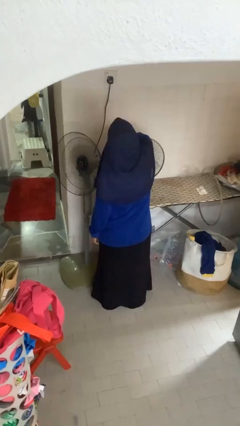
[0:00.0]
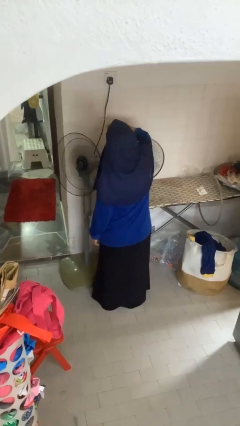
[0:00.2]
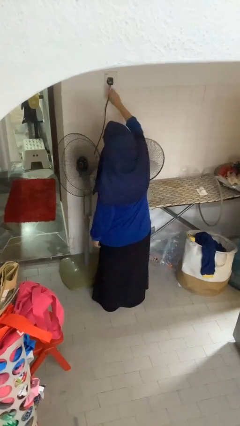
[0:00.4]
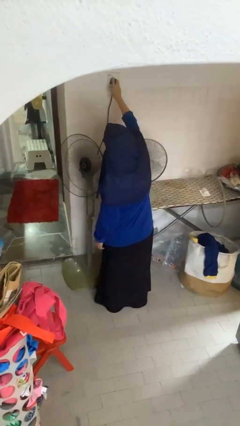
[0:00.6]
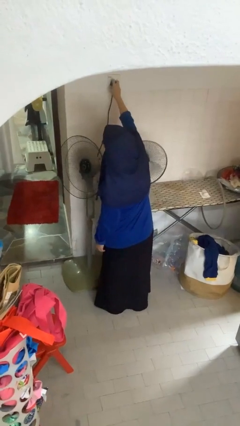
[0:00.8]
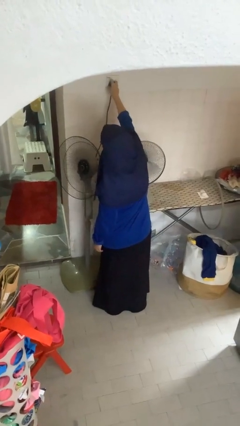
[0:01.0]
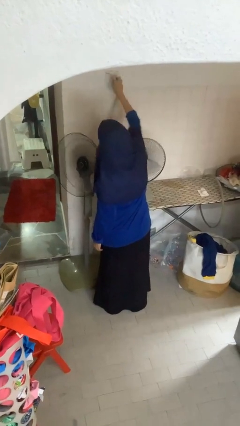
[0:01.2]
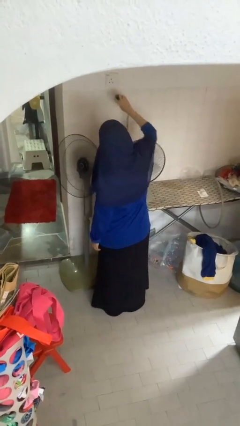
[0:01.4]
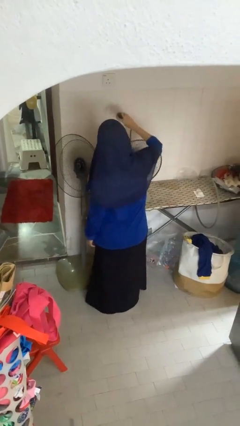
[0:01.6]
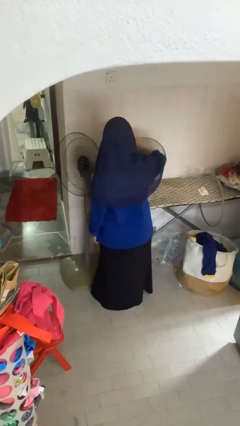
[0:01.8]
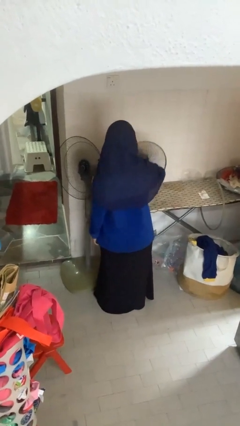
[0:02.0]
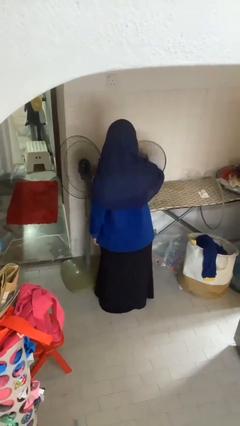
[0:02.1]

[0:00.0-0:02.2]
person unplugs from electrical socket

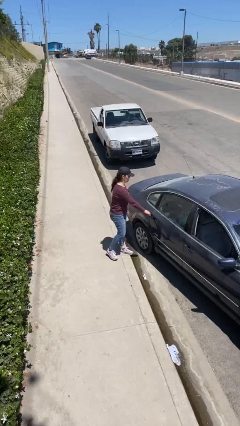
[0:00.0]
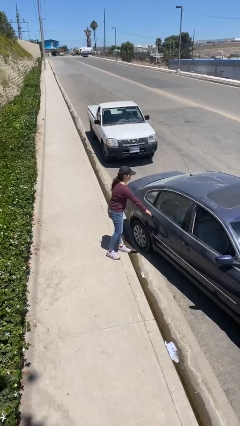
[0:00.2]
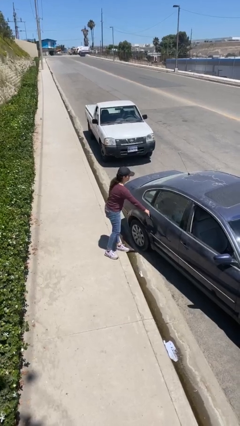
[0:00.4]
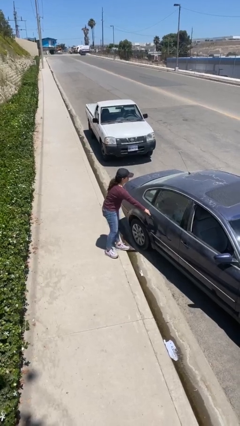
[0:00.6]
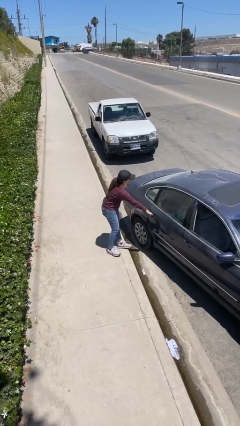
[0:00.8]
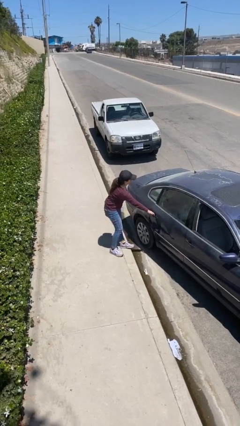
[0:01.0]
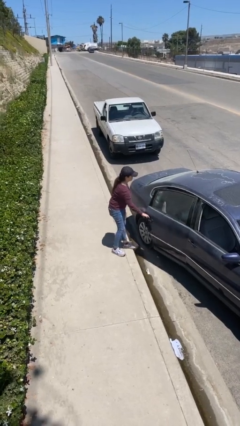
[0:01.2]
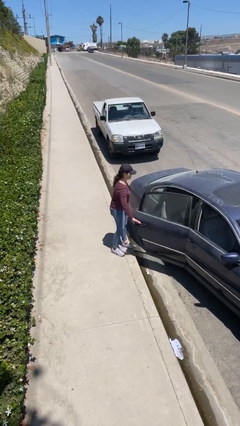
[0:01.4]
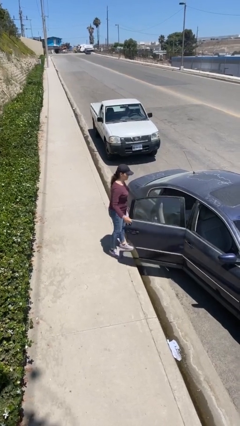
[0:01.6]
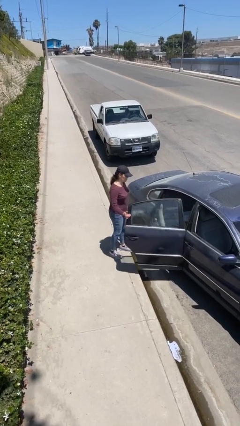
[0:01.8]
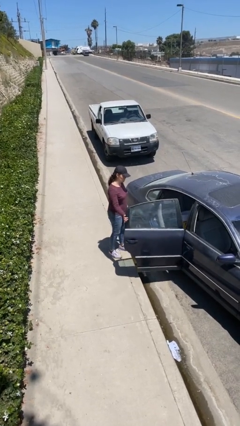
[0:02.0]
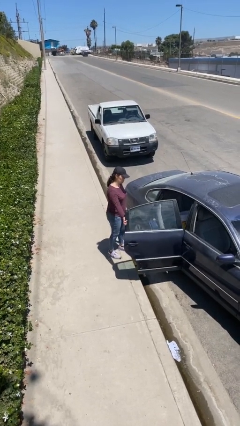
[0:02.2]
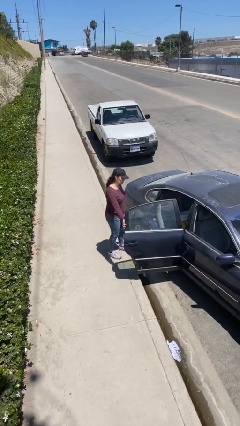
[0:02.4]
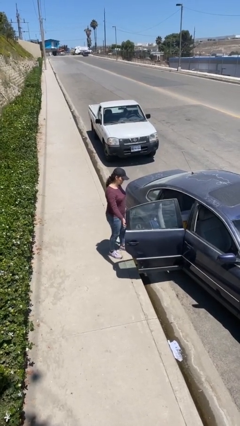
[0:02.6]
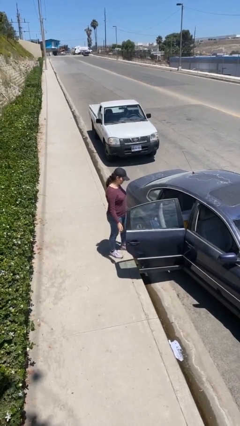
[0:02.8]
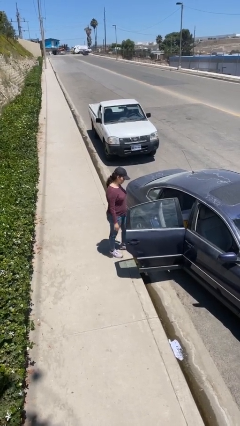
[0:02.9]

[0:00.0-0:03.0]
person opens car door

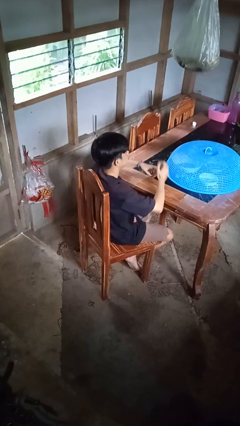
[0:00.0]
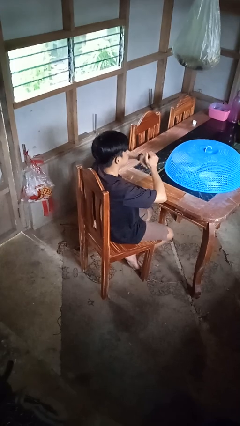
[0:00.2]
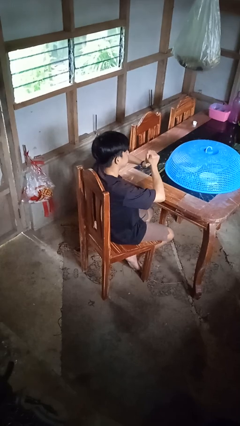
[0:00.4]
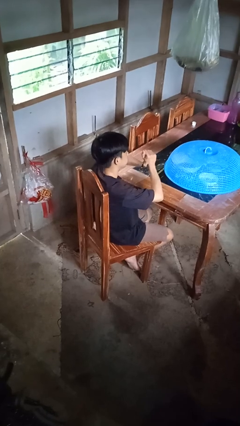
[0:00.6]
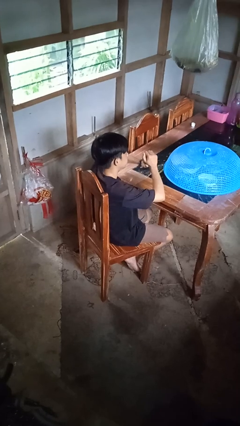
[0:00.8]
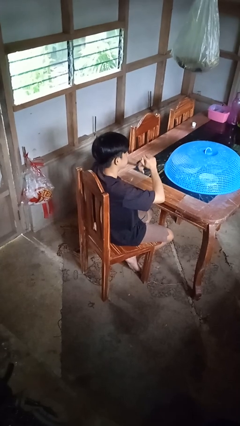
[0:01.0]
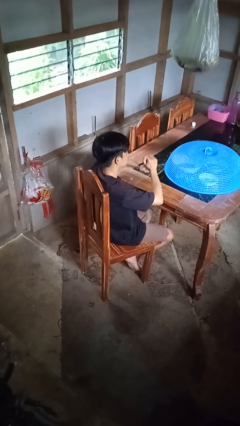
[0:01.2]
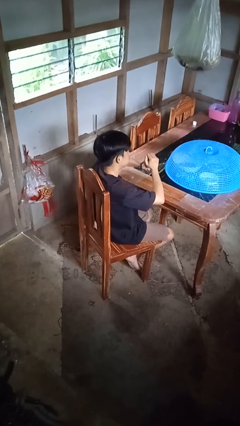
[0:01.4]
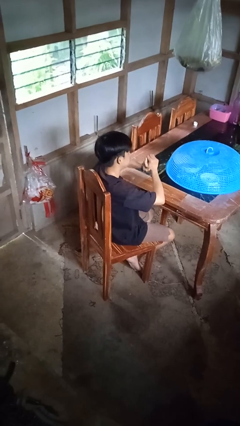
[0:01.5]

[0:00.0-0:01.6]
person cracks knuckles

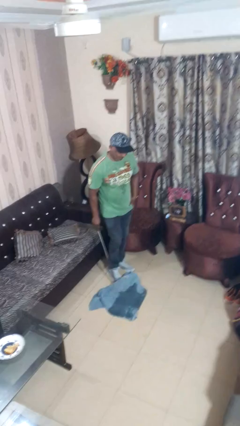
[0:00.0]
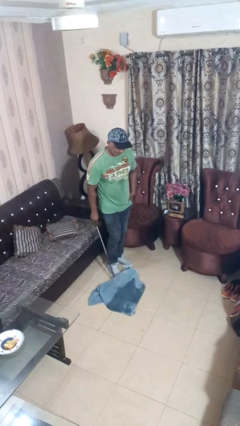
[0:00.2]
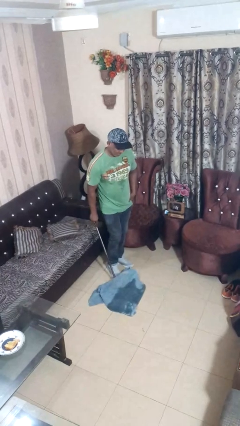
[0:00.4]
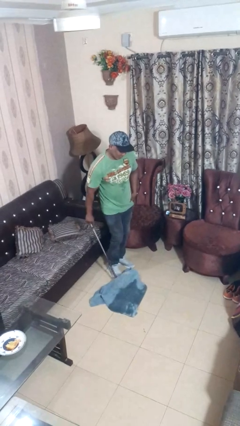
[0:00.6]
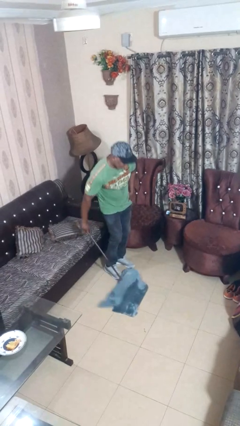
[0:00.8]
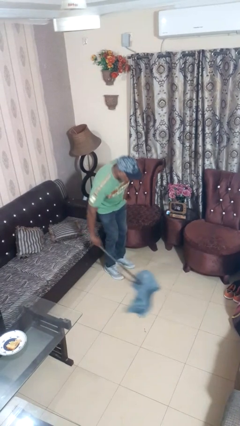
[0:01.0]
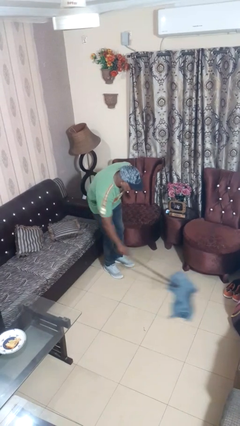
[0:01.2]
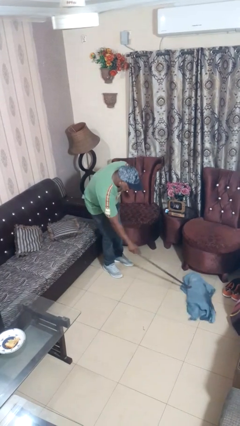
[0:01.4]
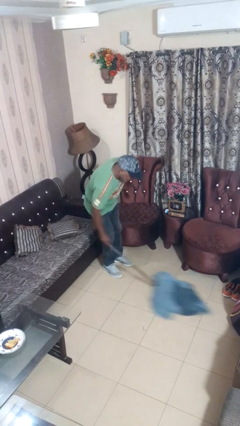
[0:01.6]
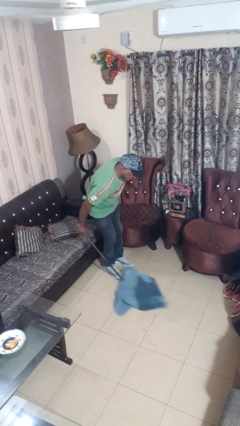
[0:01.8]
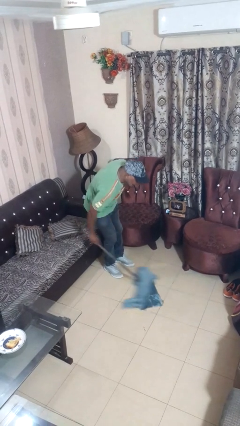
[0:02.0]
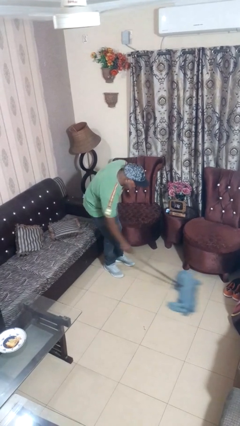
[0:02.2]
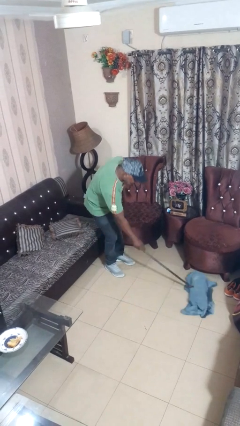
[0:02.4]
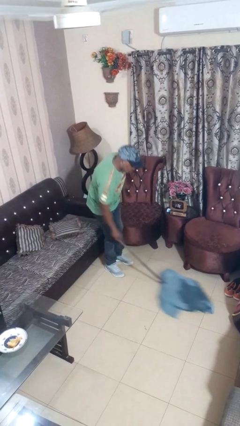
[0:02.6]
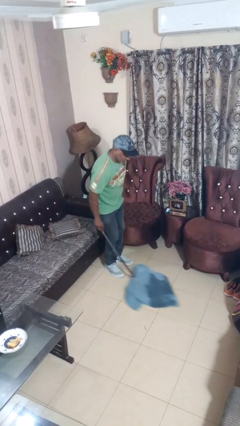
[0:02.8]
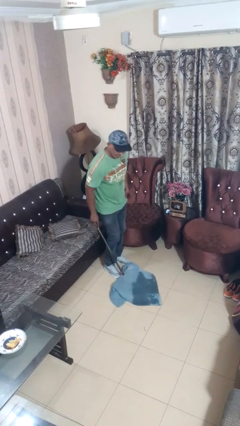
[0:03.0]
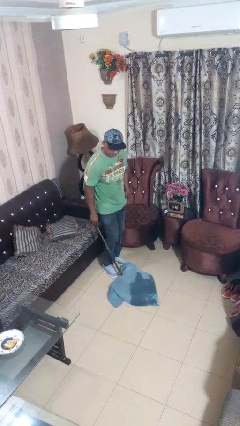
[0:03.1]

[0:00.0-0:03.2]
person mops

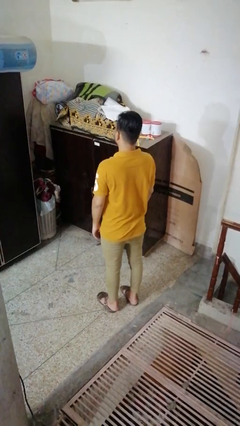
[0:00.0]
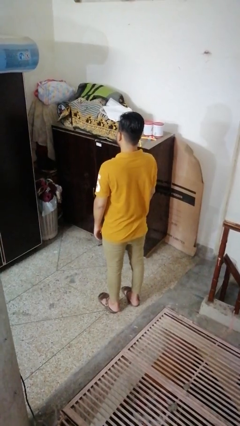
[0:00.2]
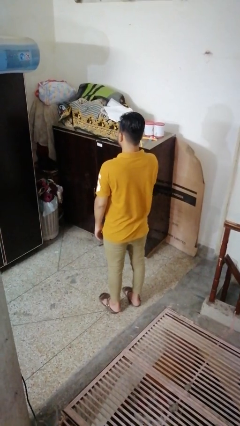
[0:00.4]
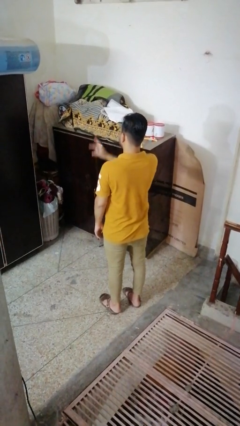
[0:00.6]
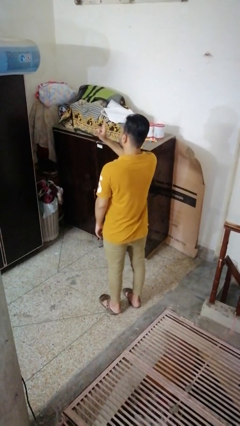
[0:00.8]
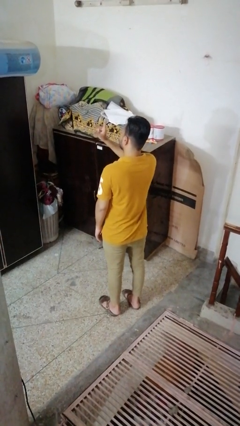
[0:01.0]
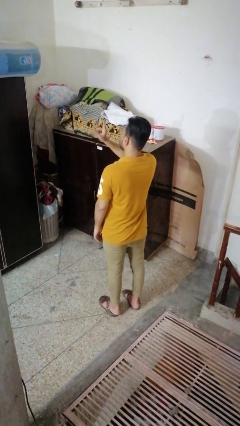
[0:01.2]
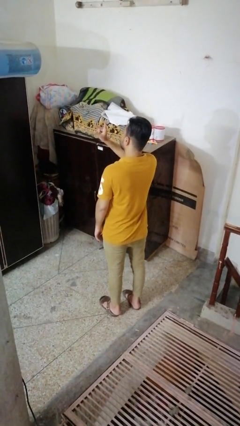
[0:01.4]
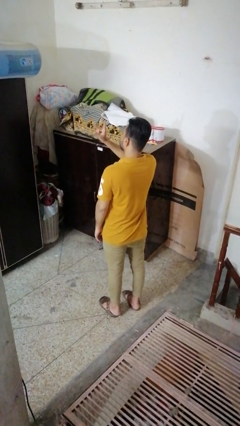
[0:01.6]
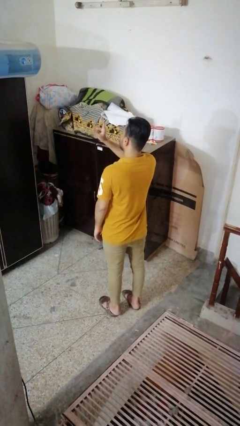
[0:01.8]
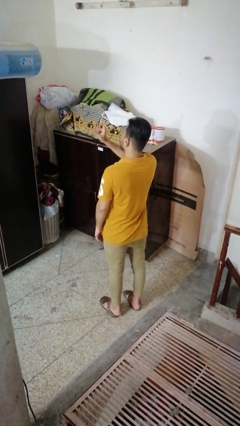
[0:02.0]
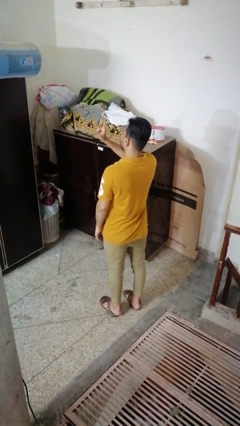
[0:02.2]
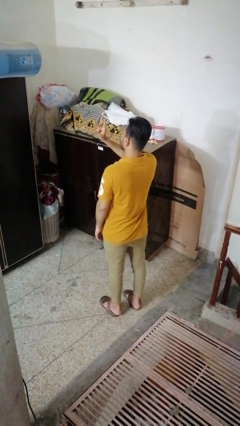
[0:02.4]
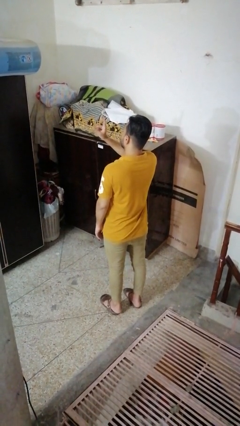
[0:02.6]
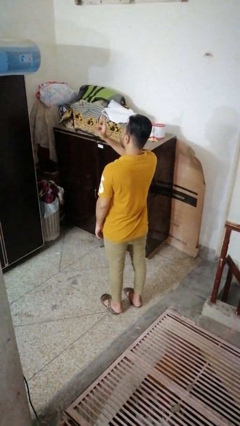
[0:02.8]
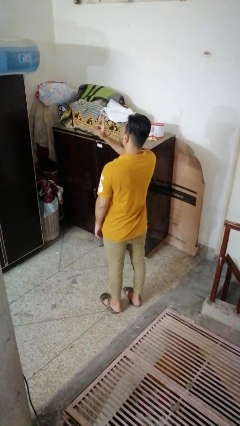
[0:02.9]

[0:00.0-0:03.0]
person snaps fingers

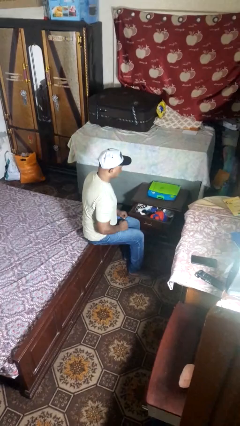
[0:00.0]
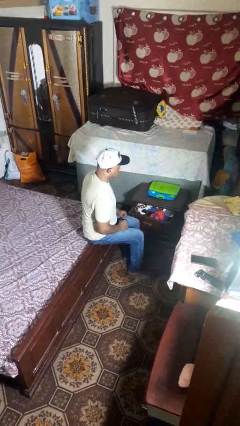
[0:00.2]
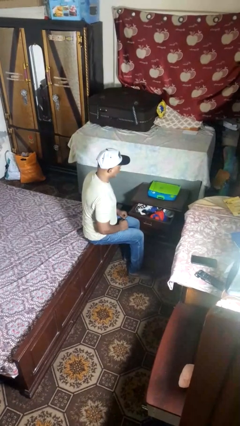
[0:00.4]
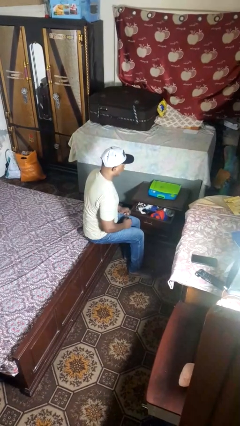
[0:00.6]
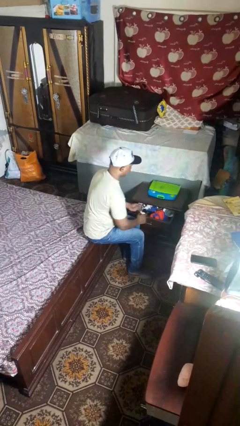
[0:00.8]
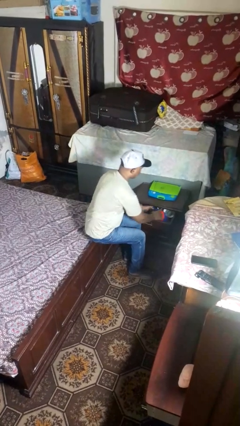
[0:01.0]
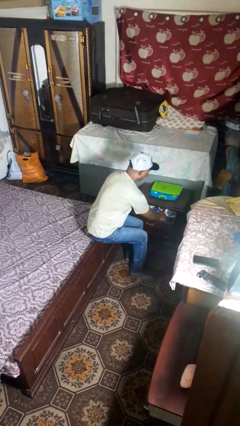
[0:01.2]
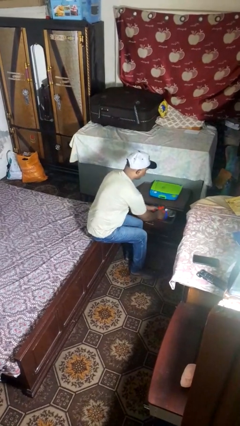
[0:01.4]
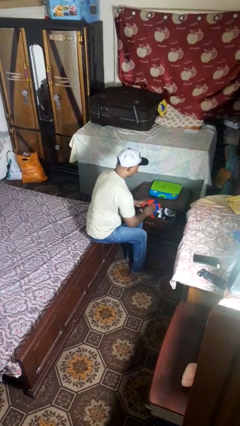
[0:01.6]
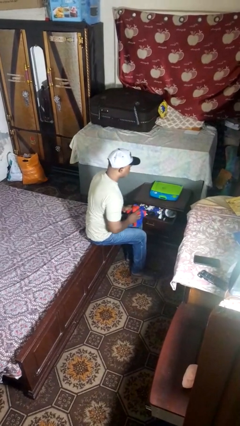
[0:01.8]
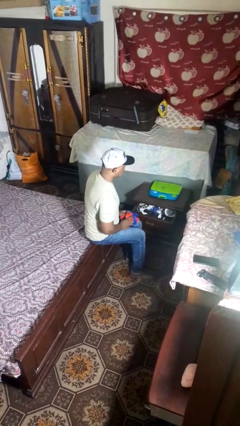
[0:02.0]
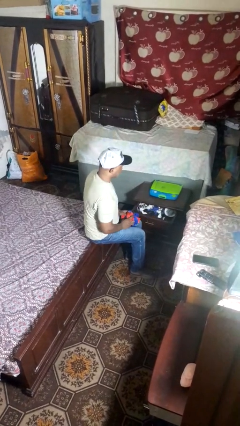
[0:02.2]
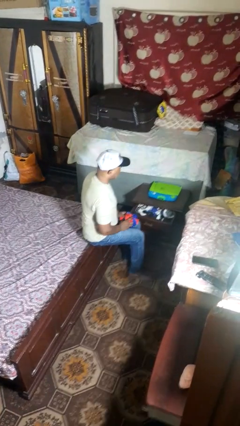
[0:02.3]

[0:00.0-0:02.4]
person takes clothes from dresser

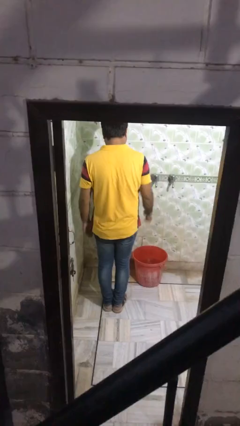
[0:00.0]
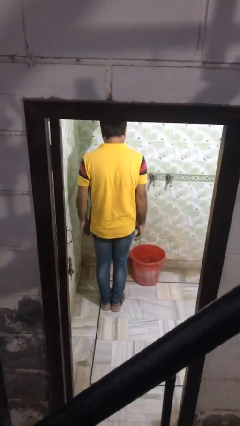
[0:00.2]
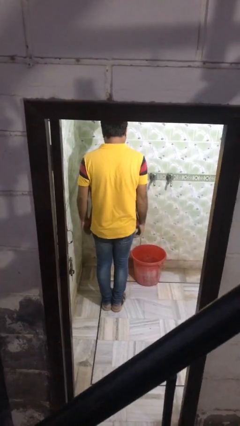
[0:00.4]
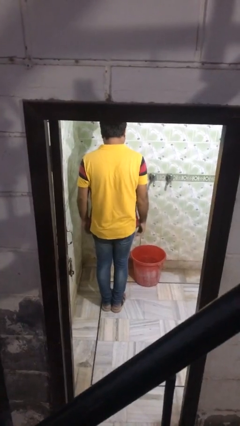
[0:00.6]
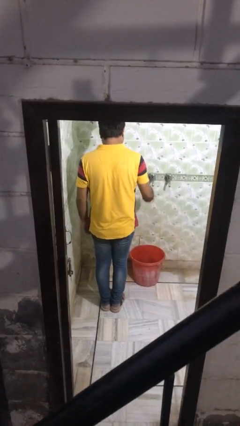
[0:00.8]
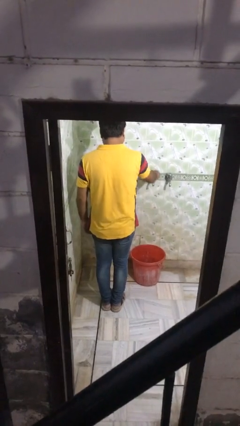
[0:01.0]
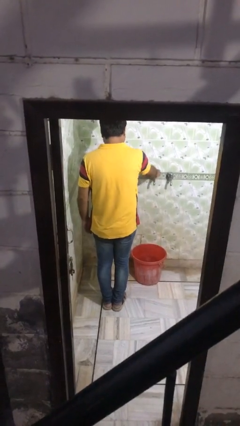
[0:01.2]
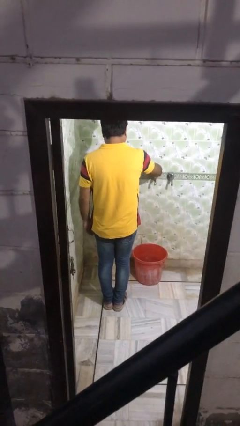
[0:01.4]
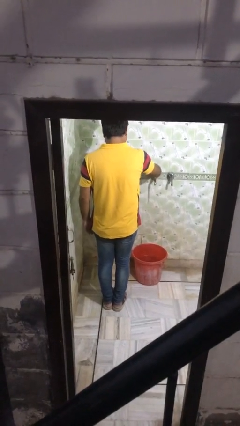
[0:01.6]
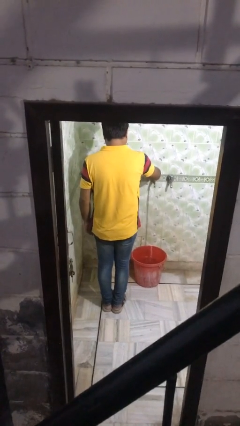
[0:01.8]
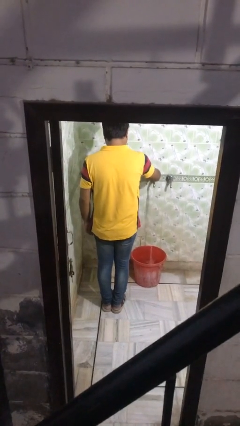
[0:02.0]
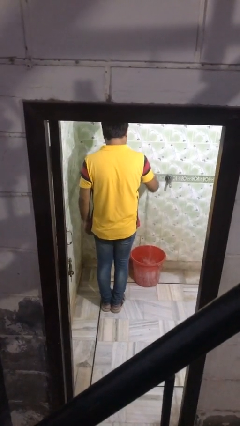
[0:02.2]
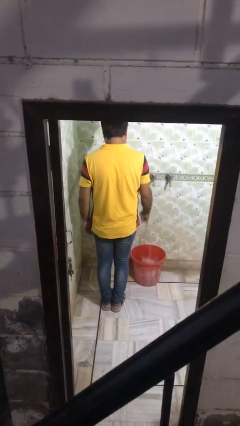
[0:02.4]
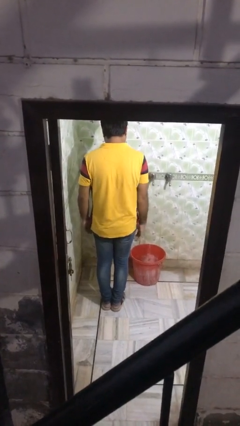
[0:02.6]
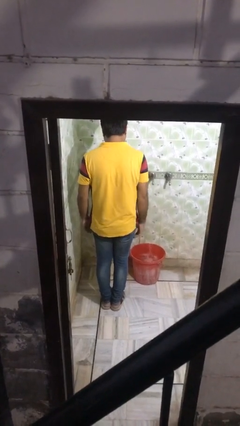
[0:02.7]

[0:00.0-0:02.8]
person turns on faucet
